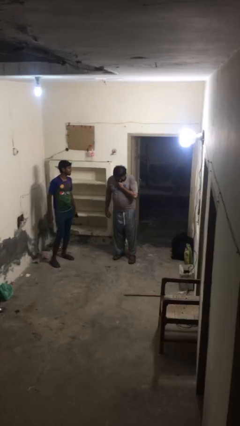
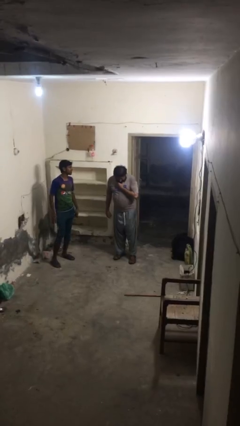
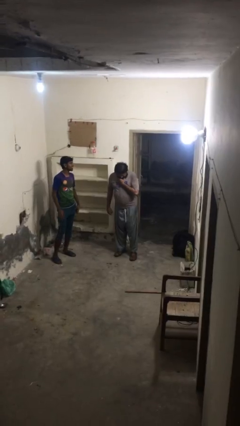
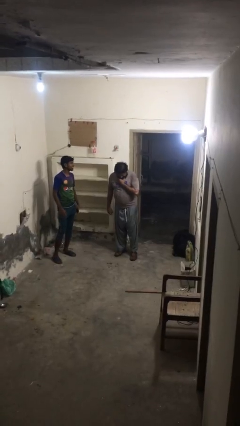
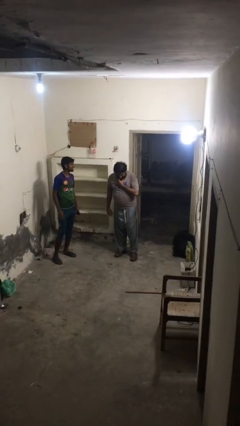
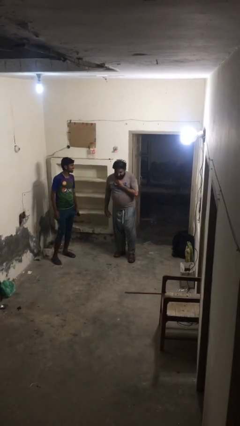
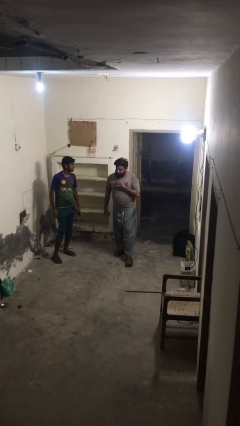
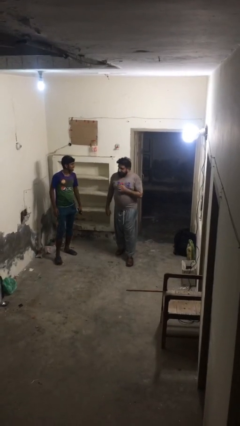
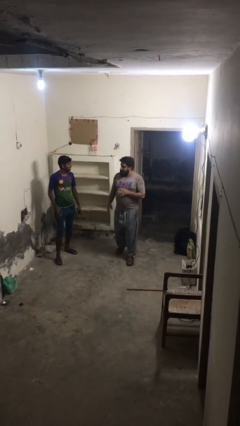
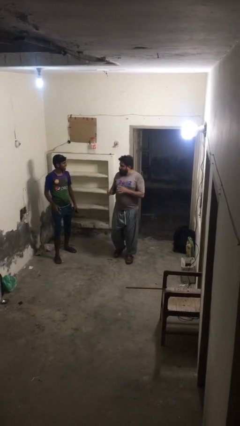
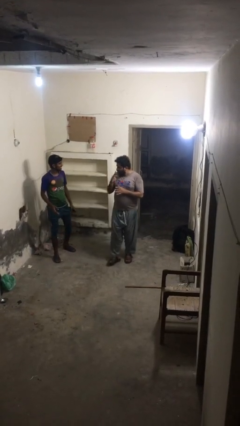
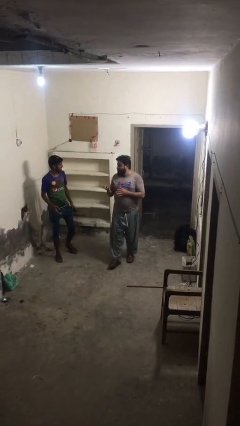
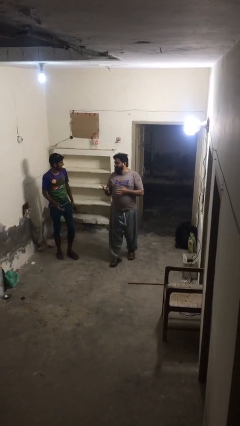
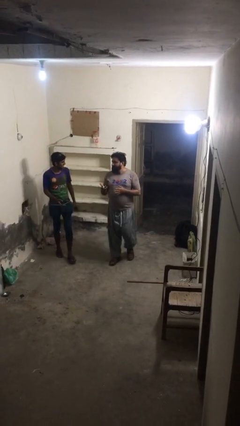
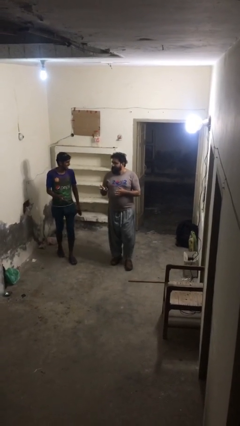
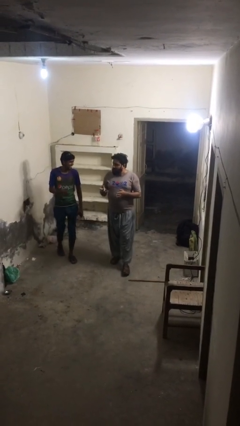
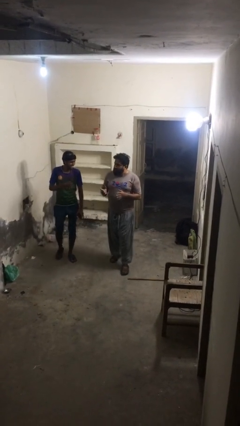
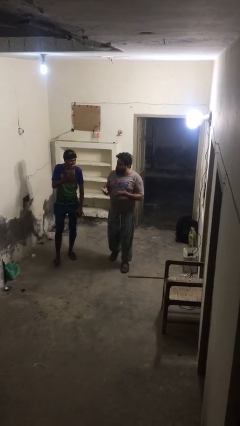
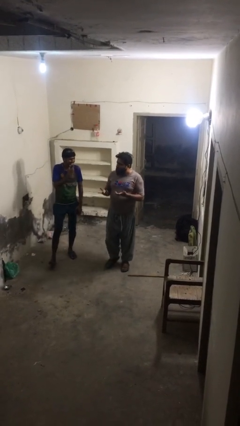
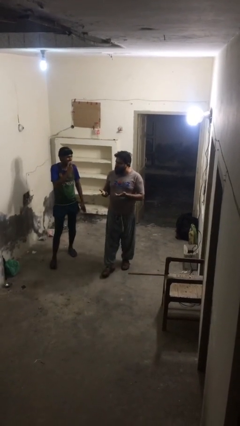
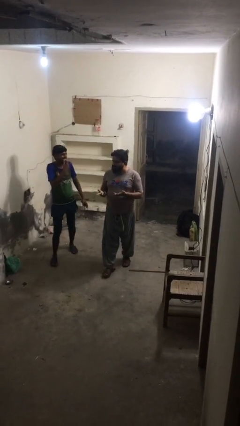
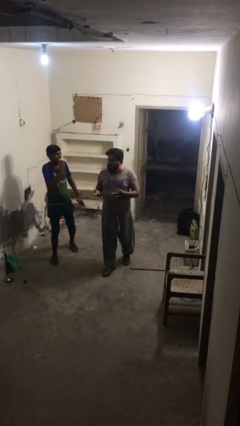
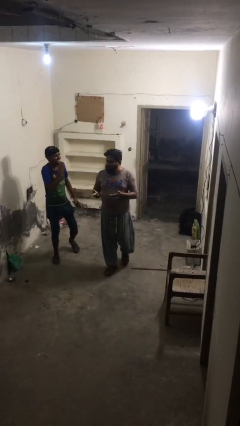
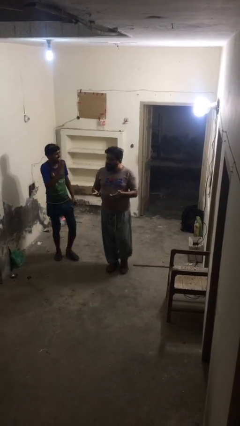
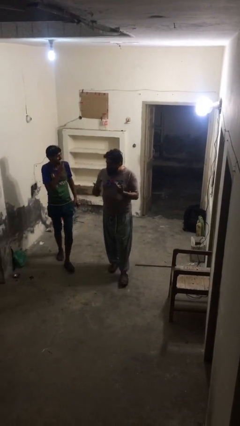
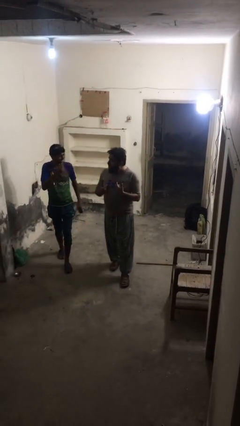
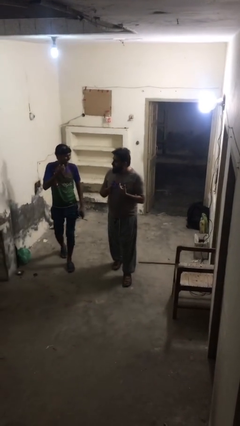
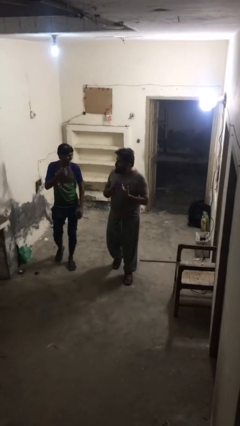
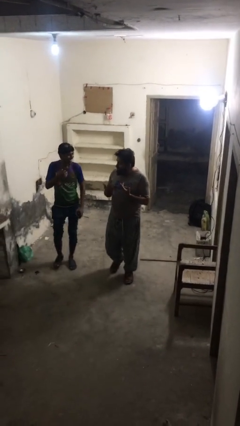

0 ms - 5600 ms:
person talks to person

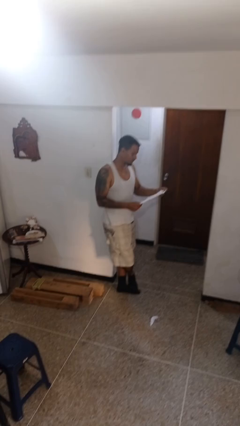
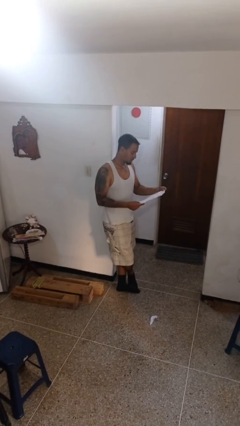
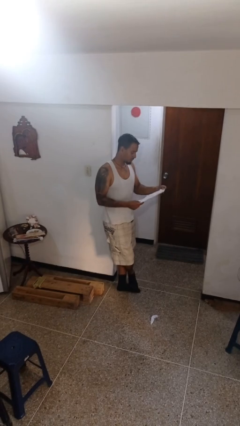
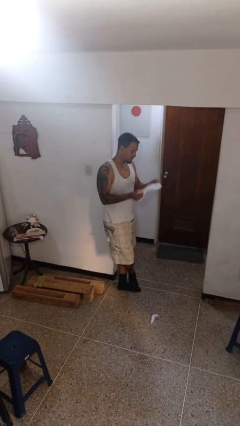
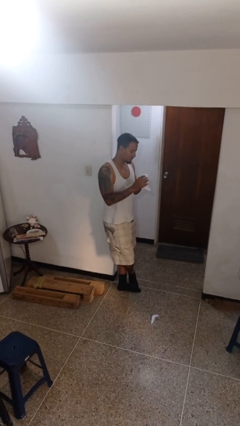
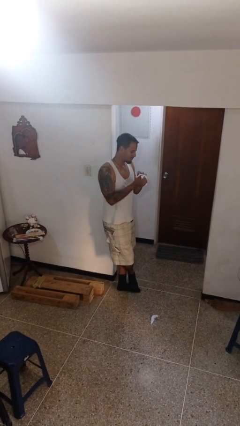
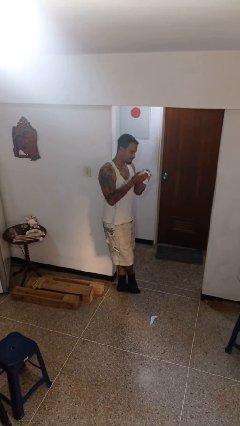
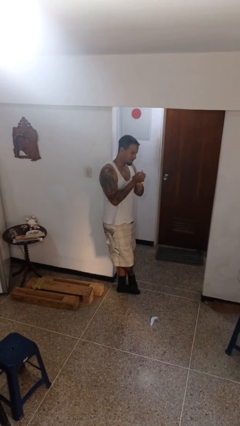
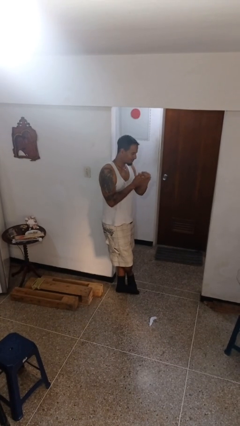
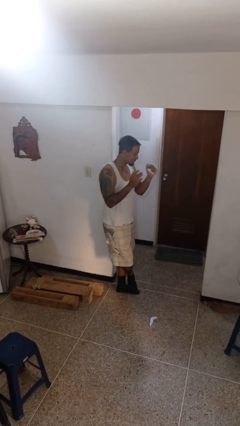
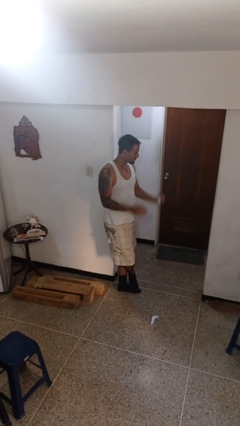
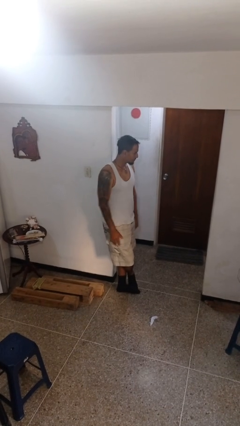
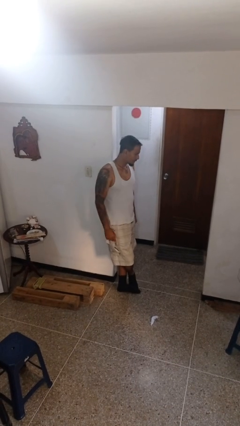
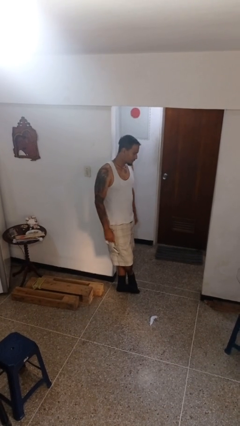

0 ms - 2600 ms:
person crumples paper

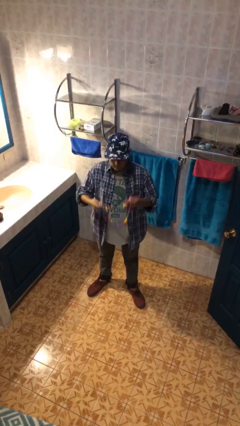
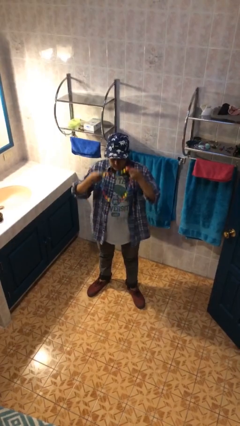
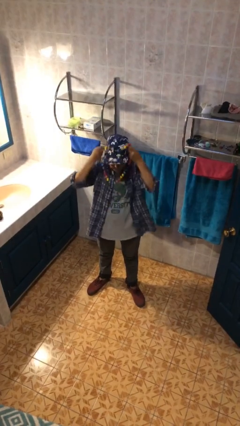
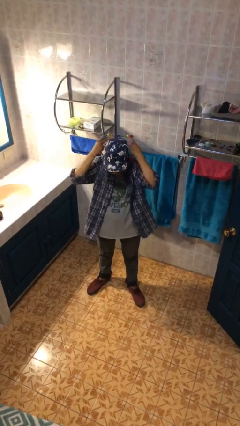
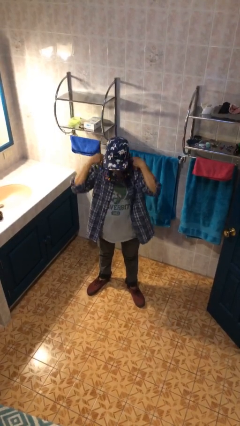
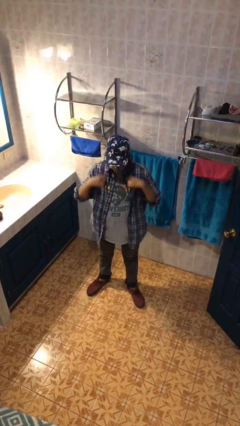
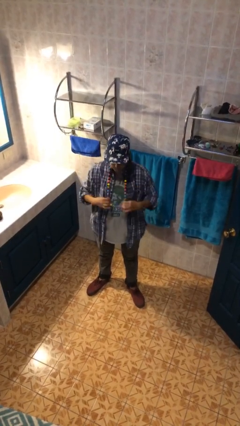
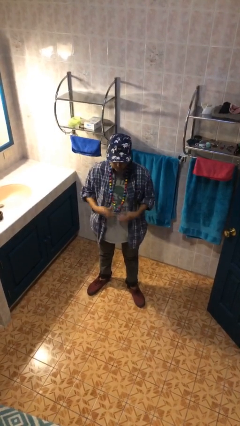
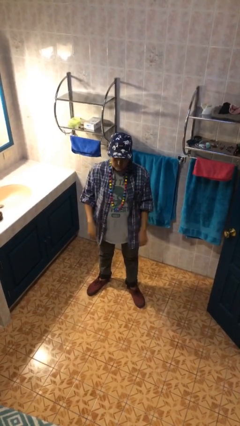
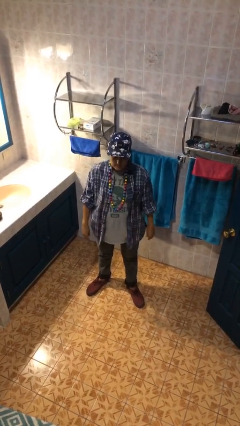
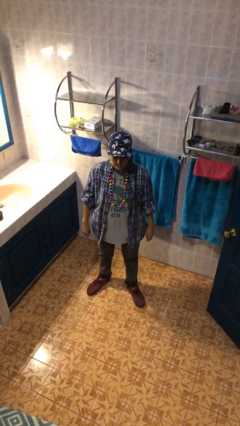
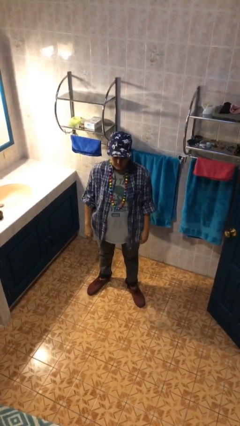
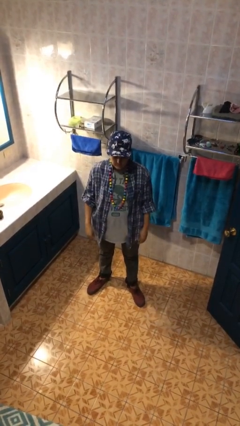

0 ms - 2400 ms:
person puts on necklace

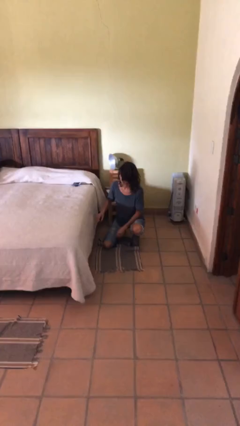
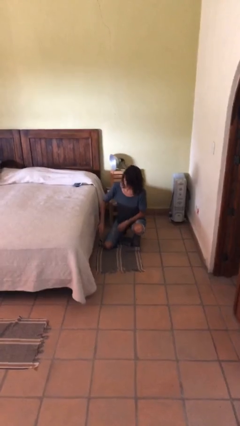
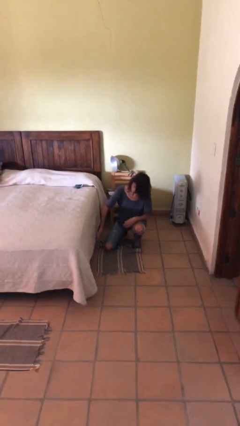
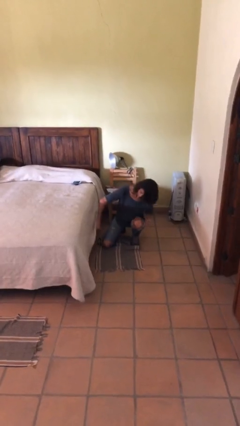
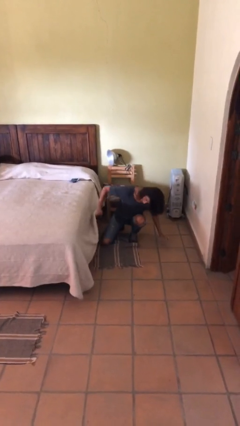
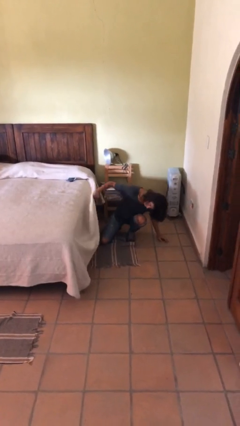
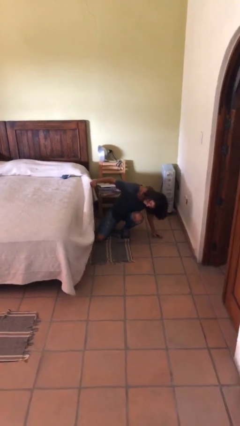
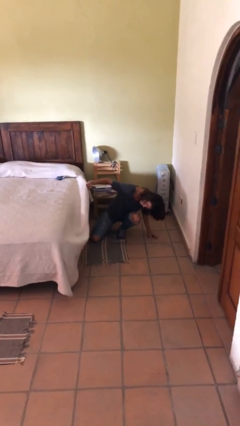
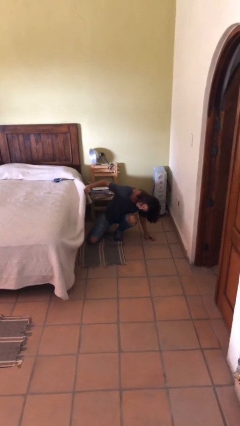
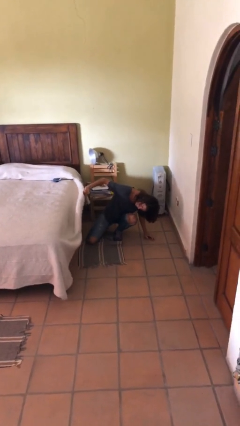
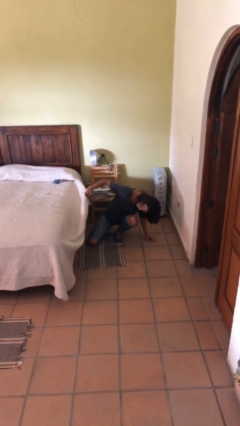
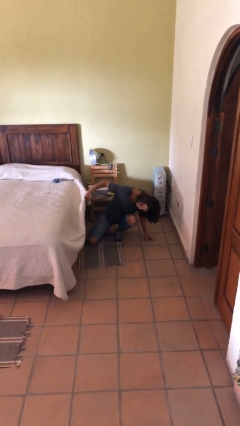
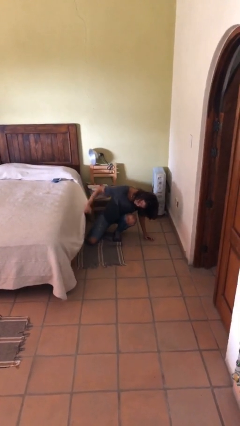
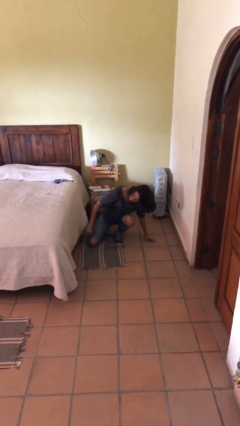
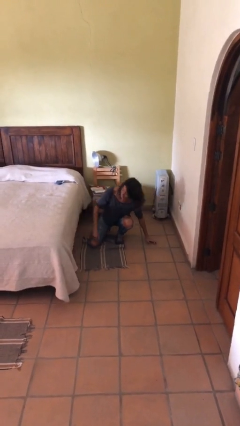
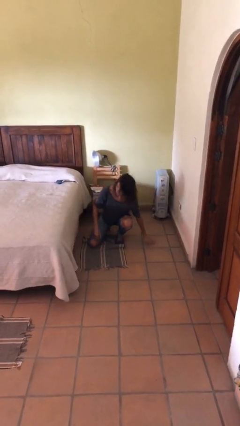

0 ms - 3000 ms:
person searches under bed

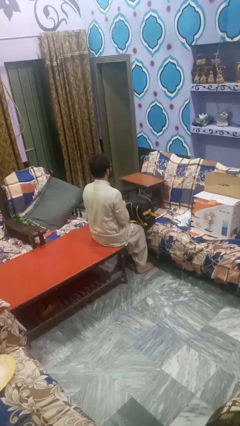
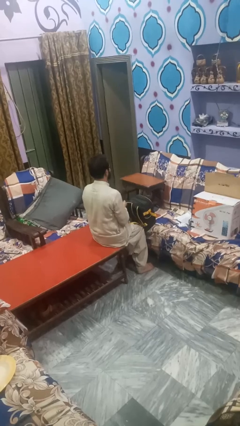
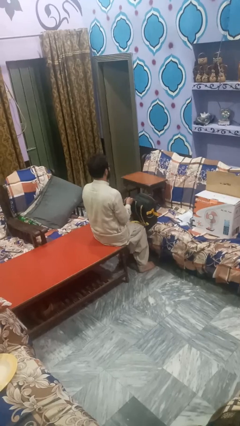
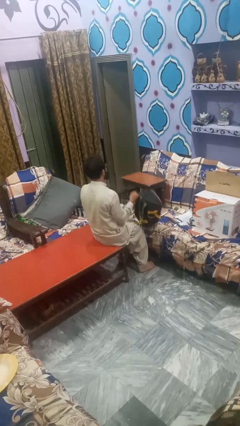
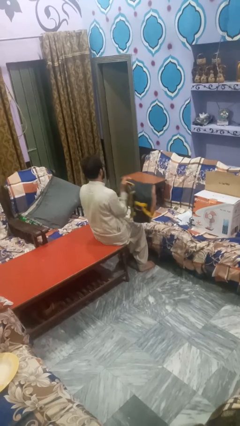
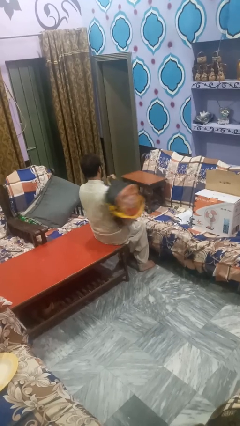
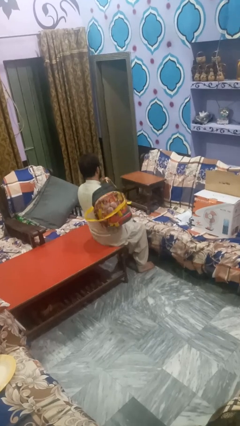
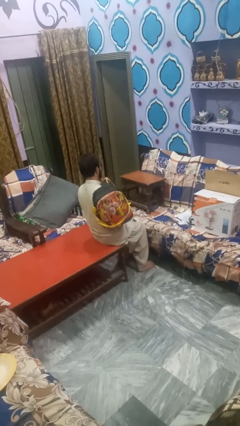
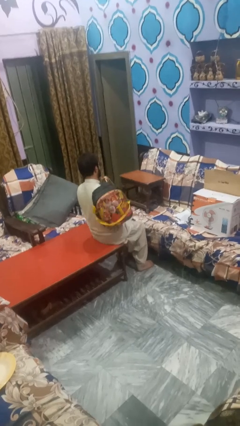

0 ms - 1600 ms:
person puts on backpack

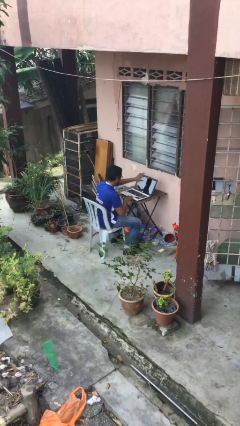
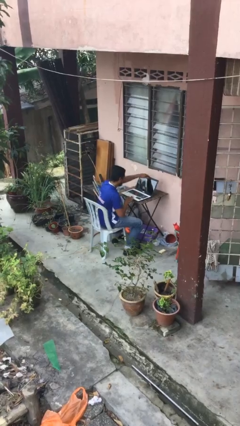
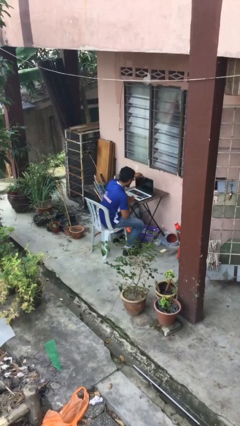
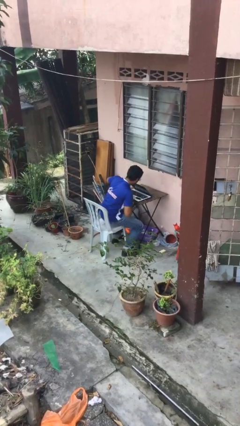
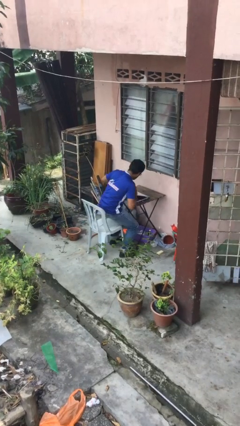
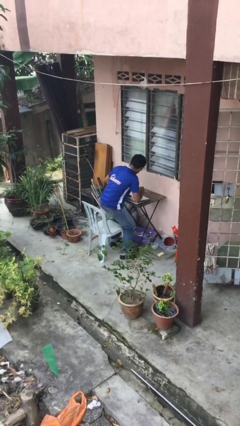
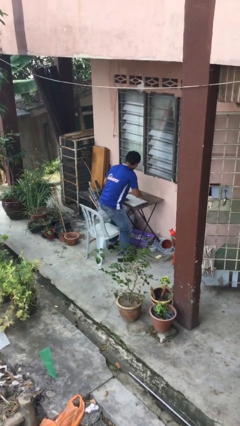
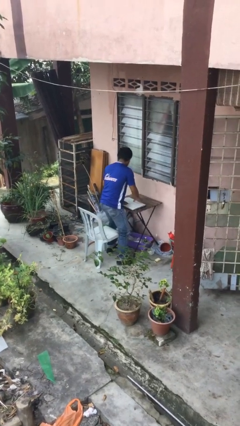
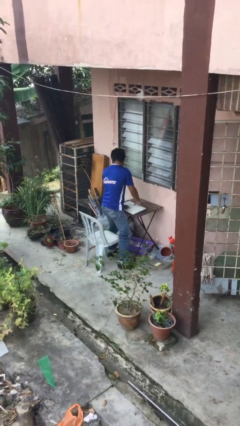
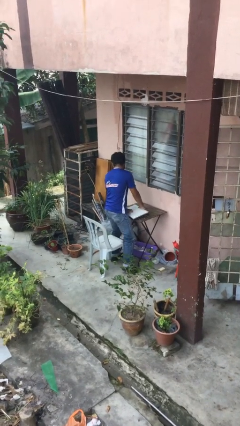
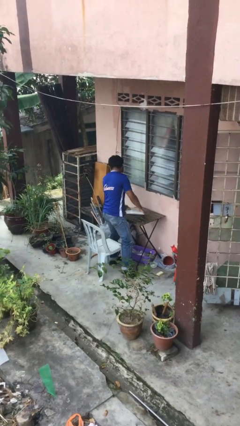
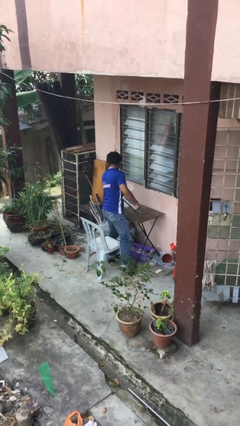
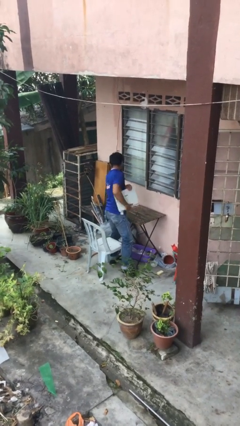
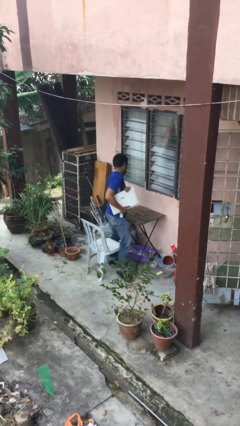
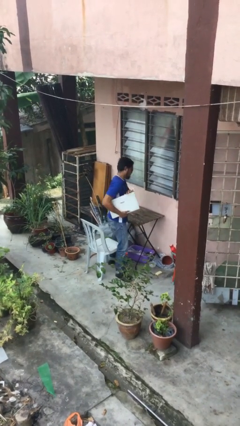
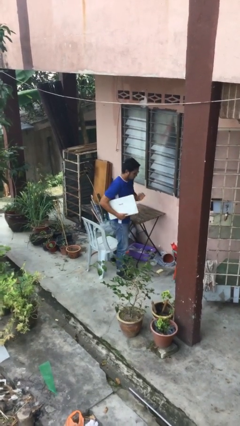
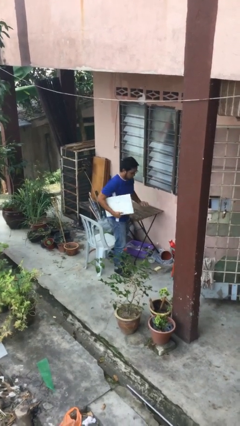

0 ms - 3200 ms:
person stands up
